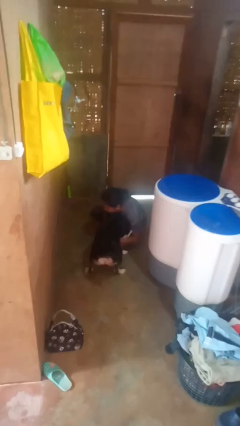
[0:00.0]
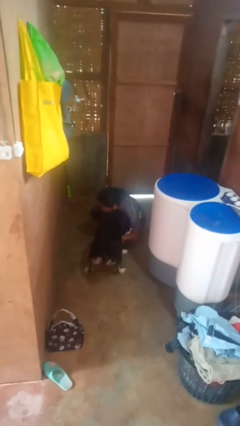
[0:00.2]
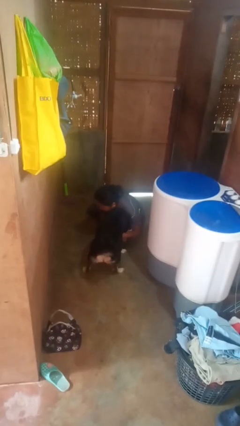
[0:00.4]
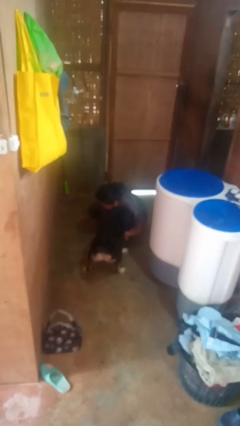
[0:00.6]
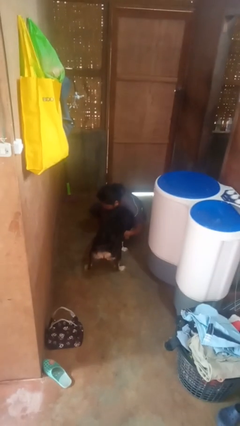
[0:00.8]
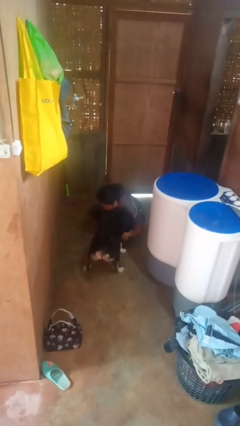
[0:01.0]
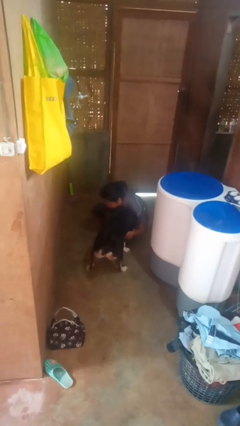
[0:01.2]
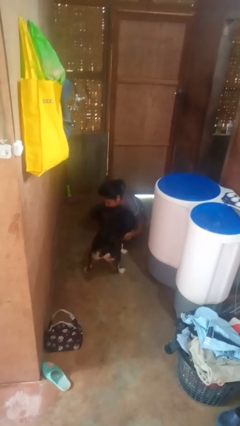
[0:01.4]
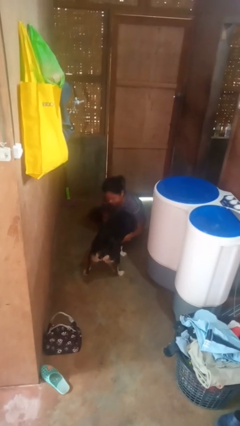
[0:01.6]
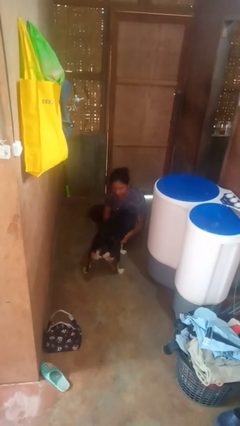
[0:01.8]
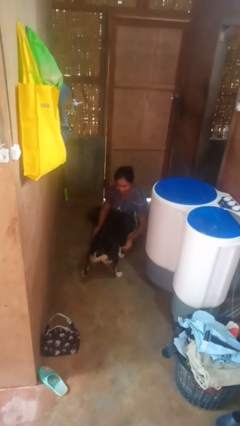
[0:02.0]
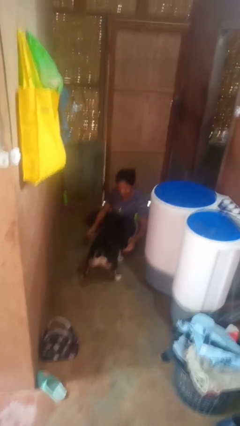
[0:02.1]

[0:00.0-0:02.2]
person hugs dog

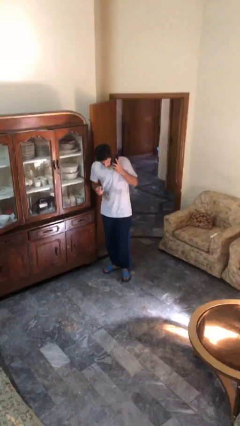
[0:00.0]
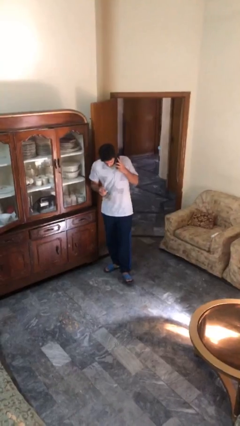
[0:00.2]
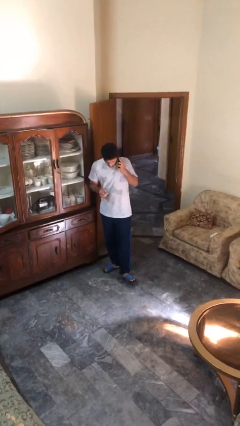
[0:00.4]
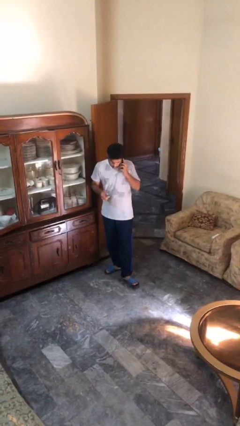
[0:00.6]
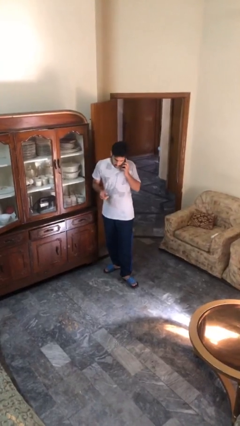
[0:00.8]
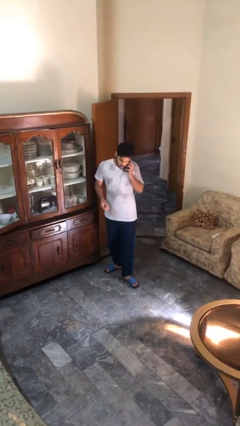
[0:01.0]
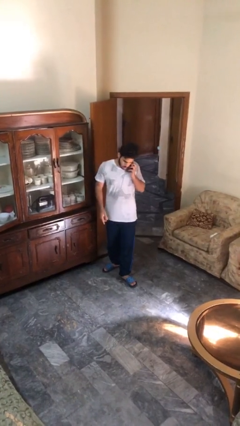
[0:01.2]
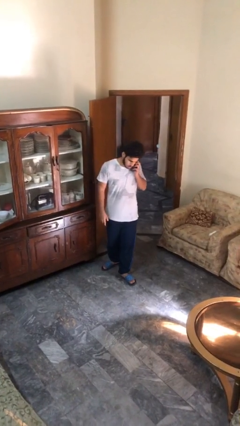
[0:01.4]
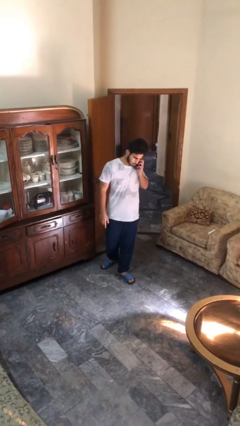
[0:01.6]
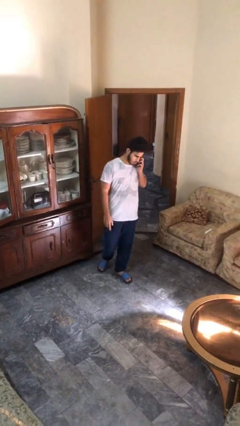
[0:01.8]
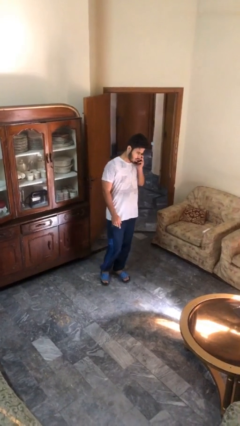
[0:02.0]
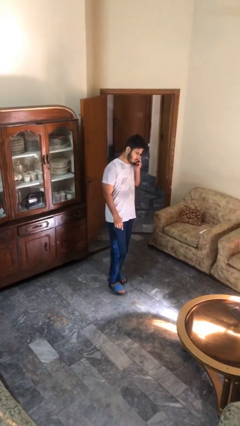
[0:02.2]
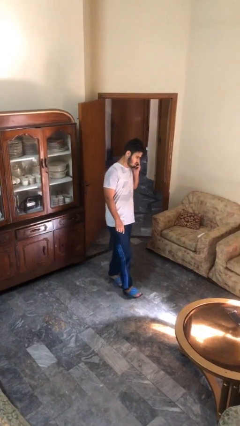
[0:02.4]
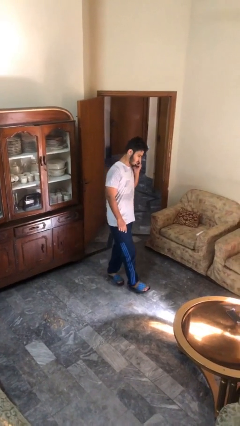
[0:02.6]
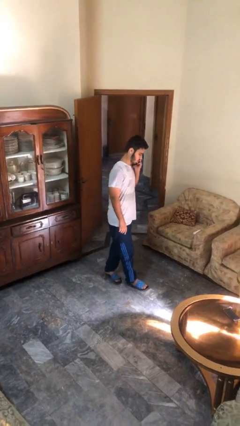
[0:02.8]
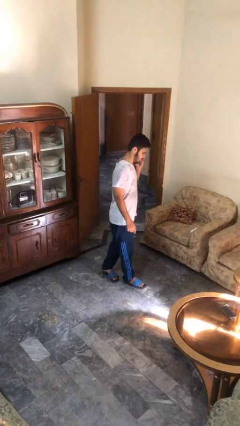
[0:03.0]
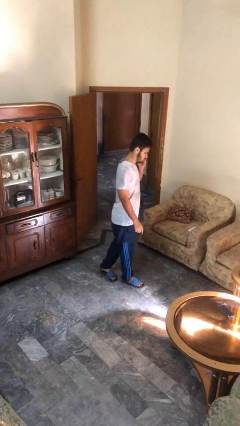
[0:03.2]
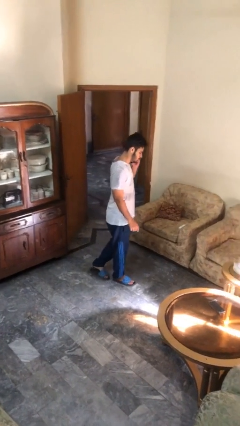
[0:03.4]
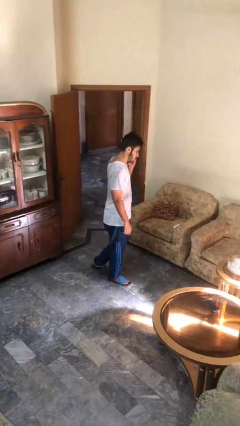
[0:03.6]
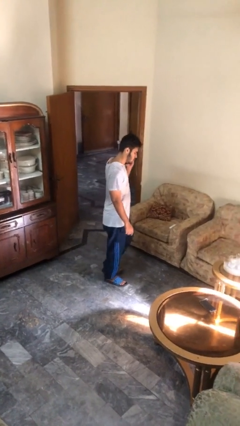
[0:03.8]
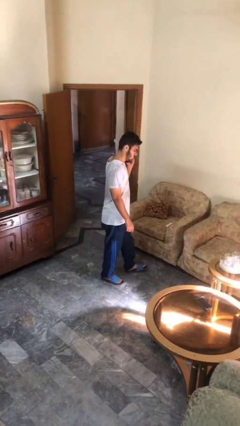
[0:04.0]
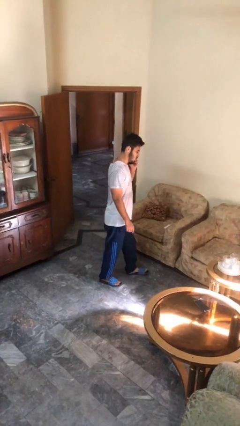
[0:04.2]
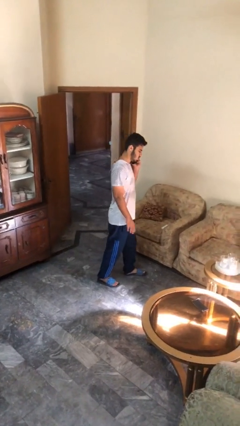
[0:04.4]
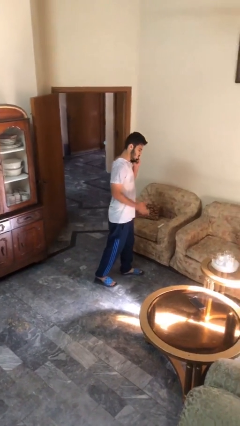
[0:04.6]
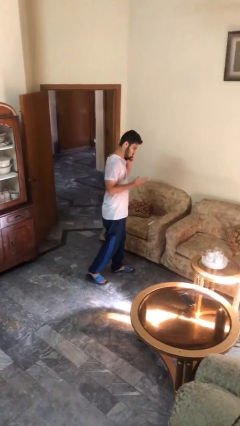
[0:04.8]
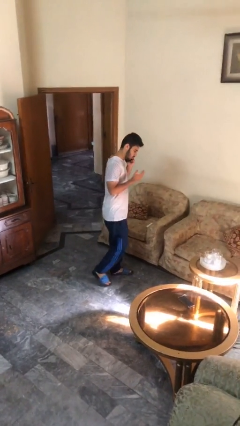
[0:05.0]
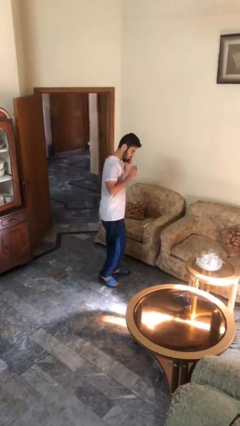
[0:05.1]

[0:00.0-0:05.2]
person talks on phone

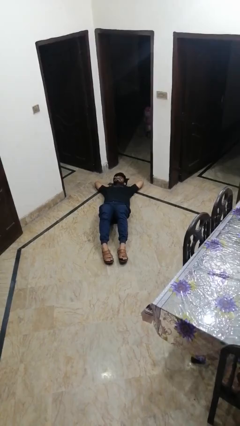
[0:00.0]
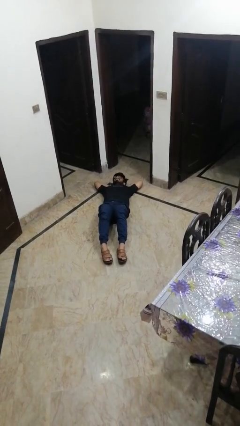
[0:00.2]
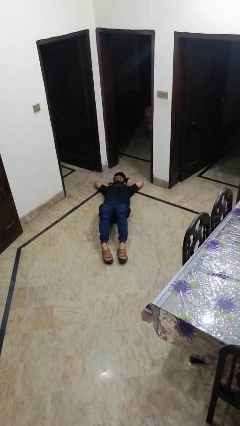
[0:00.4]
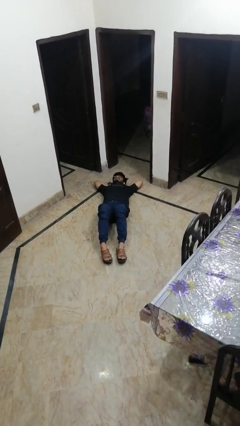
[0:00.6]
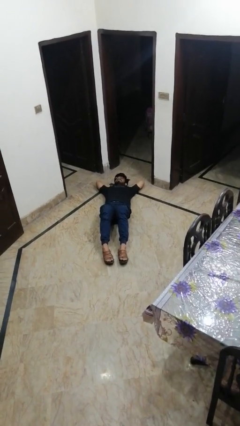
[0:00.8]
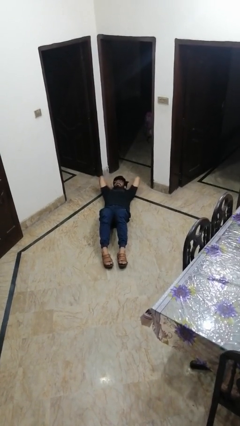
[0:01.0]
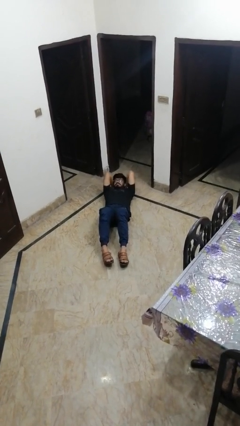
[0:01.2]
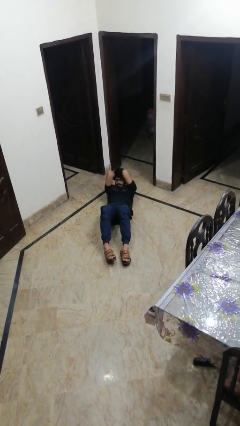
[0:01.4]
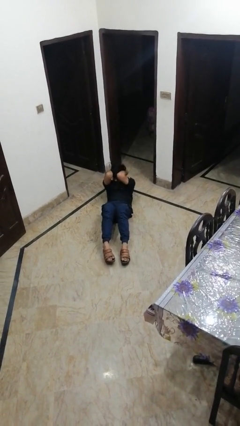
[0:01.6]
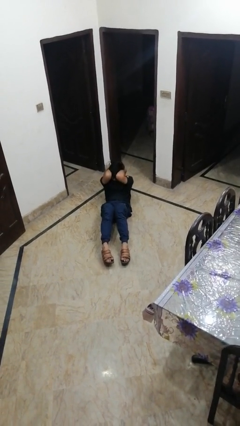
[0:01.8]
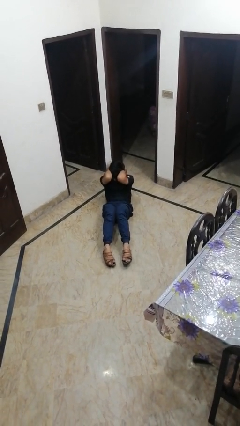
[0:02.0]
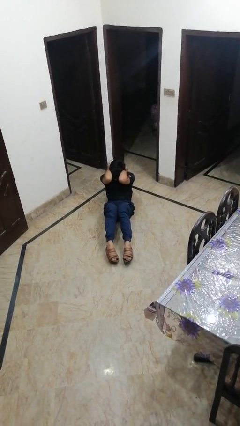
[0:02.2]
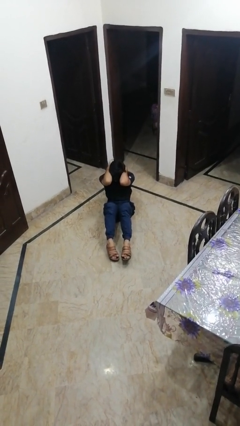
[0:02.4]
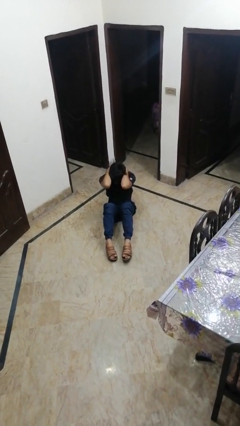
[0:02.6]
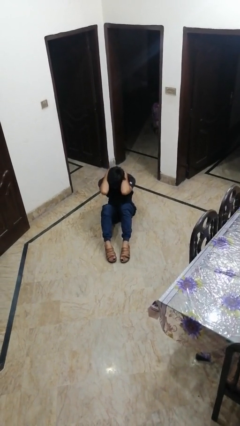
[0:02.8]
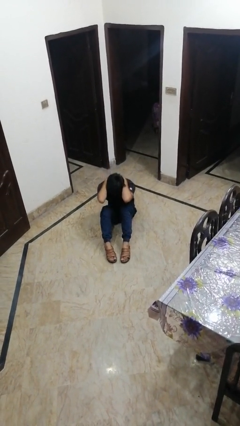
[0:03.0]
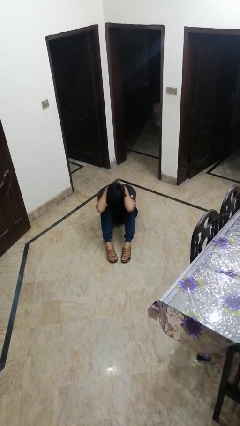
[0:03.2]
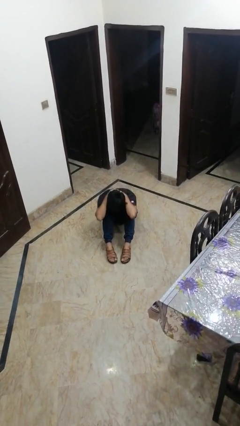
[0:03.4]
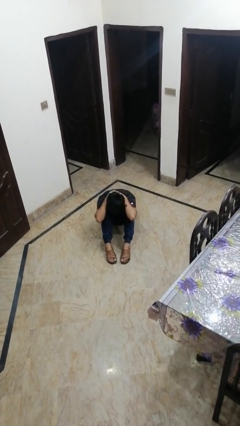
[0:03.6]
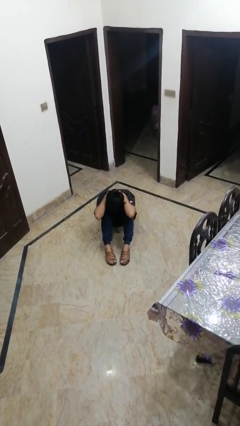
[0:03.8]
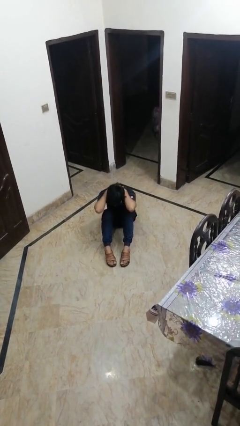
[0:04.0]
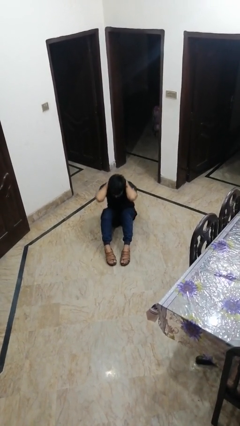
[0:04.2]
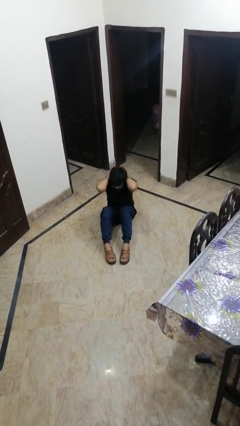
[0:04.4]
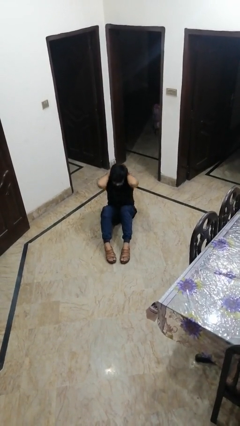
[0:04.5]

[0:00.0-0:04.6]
person exercises with situp

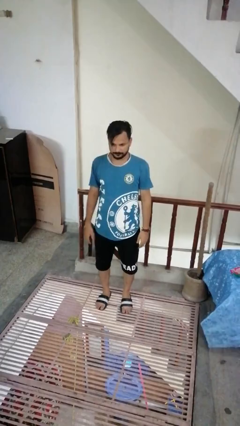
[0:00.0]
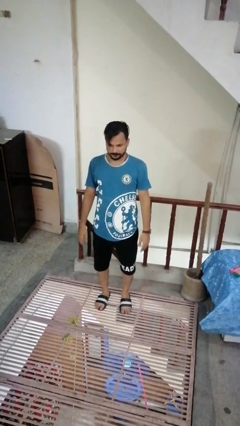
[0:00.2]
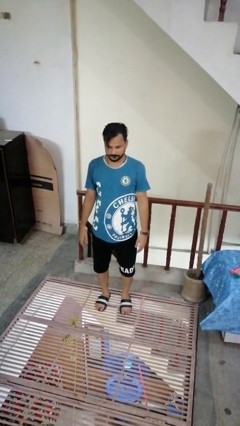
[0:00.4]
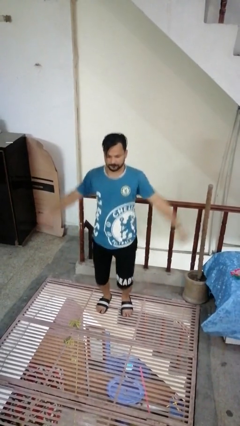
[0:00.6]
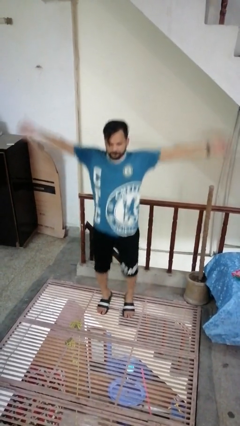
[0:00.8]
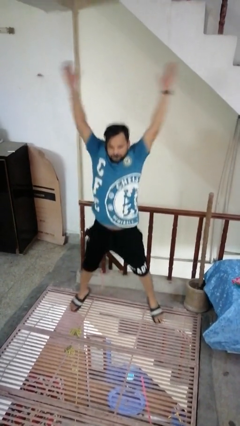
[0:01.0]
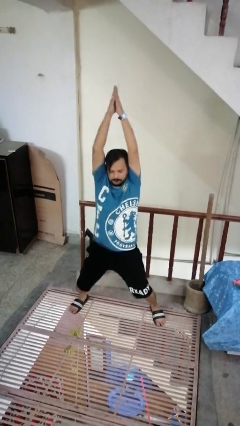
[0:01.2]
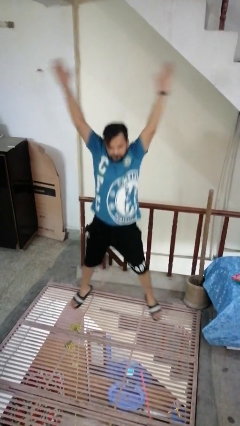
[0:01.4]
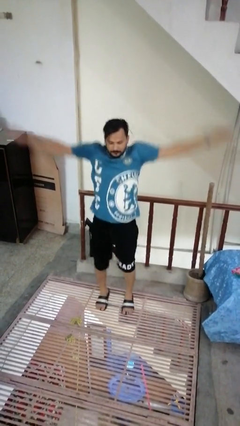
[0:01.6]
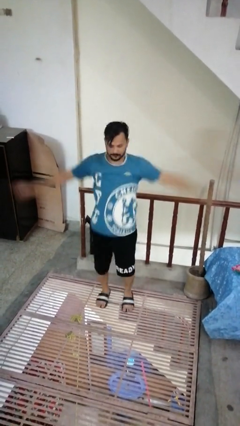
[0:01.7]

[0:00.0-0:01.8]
person exercises with jumping jacks

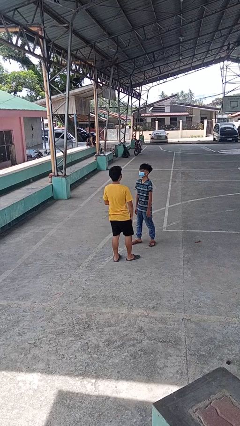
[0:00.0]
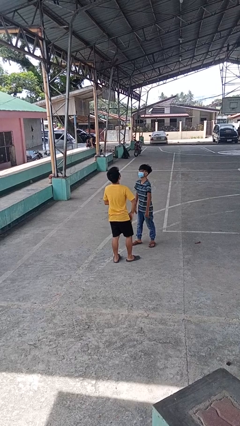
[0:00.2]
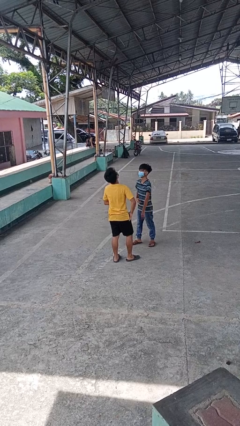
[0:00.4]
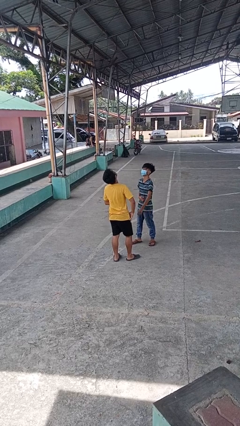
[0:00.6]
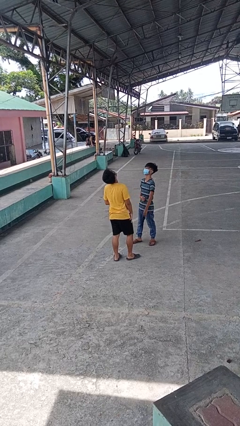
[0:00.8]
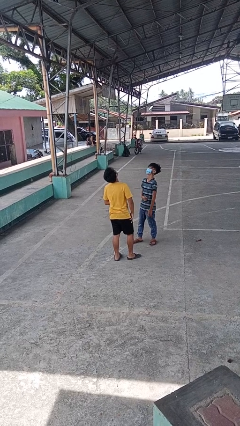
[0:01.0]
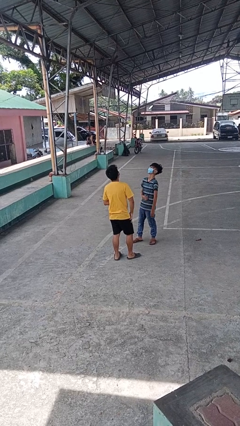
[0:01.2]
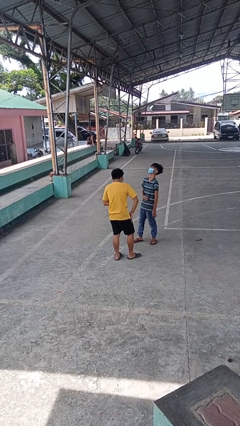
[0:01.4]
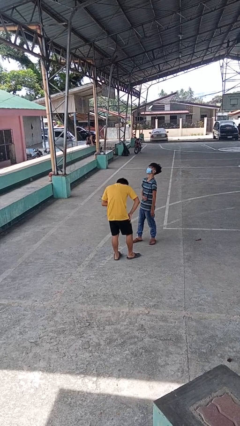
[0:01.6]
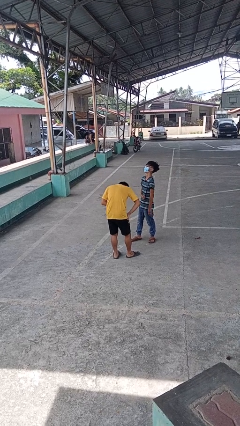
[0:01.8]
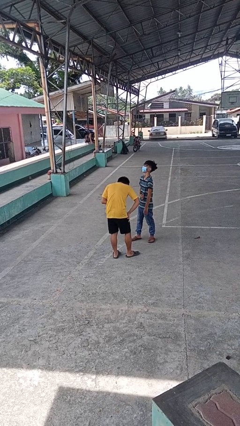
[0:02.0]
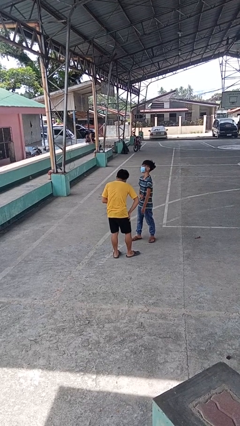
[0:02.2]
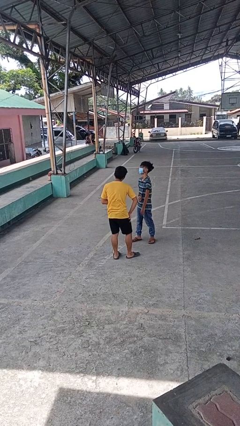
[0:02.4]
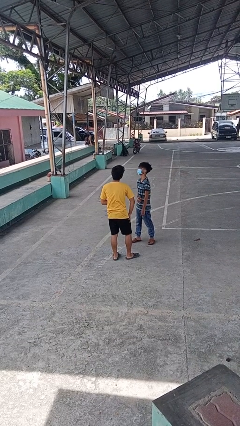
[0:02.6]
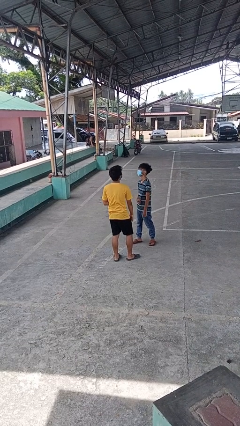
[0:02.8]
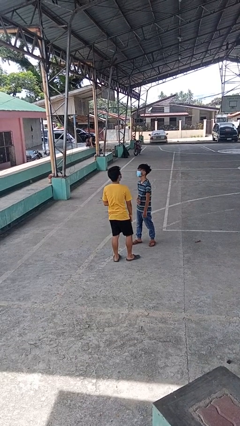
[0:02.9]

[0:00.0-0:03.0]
person laughs with person

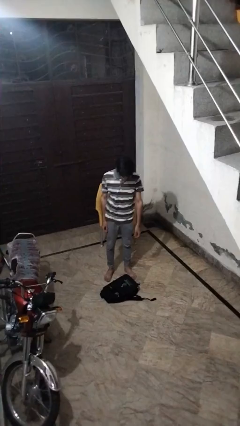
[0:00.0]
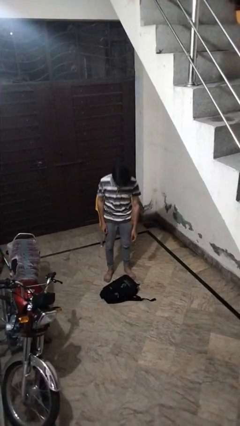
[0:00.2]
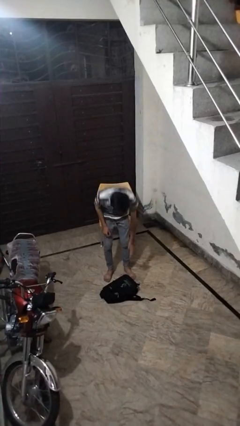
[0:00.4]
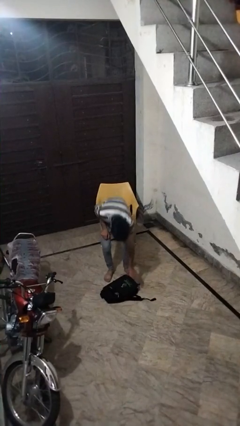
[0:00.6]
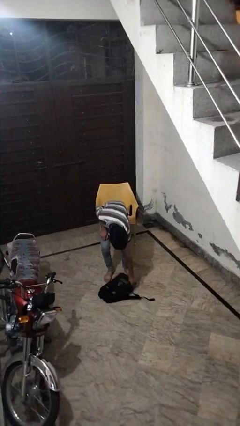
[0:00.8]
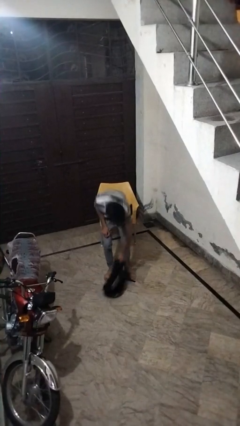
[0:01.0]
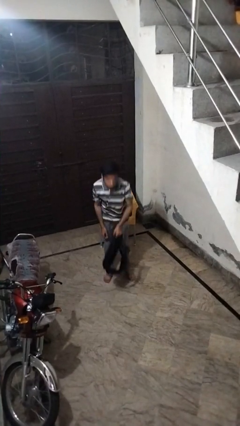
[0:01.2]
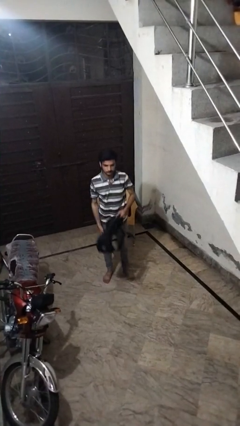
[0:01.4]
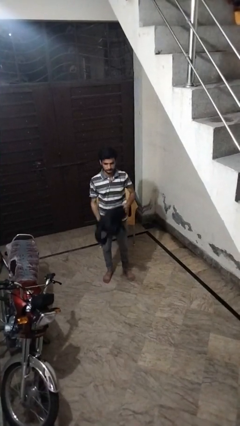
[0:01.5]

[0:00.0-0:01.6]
person picks up object from floor
